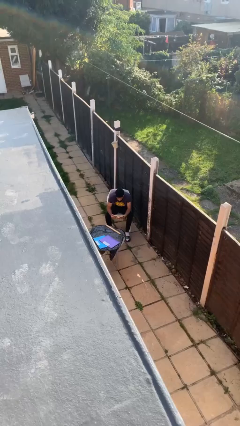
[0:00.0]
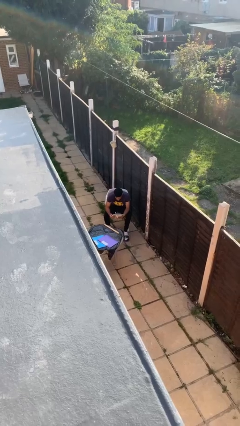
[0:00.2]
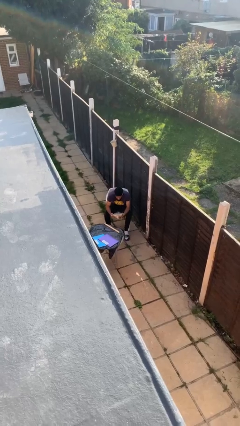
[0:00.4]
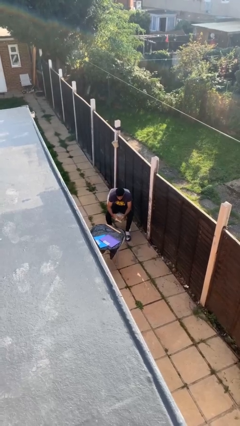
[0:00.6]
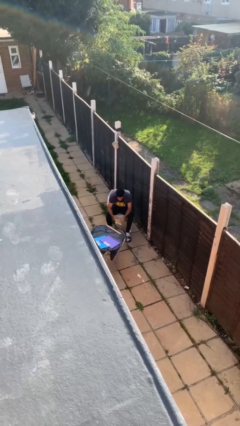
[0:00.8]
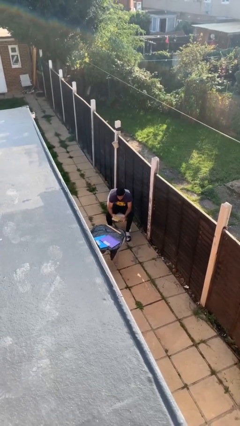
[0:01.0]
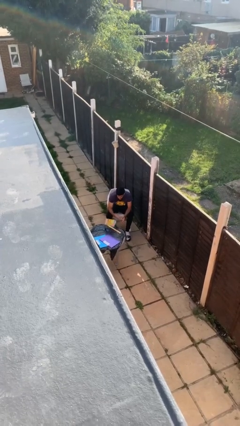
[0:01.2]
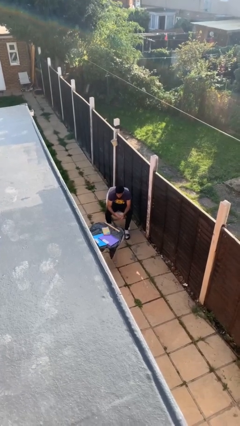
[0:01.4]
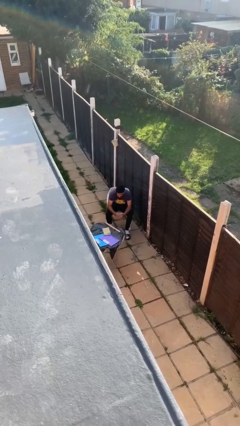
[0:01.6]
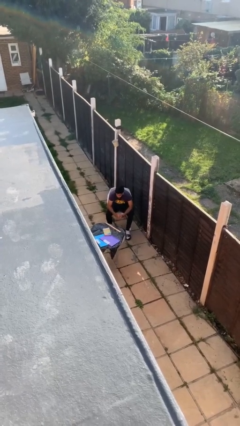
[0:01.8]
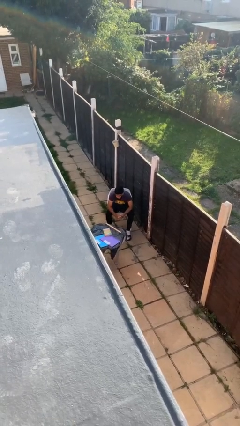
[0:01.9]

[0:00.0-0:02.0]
person puts down object on table

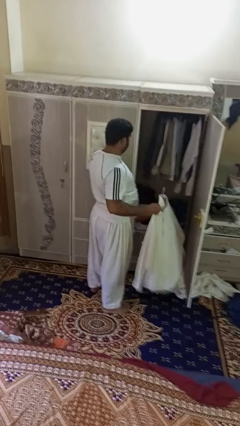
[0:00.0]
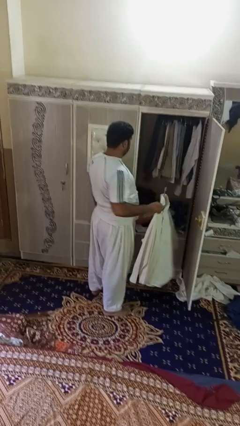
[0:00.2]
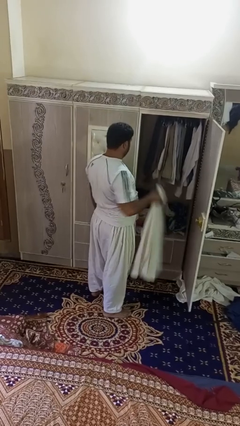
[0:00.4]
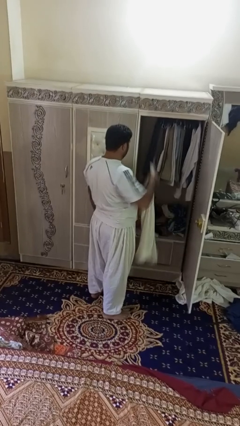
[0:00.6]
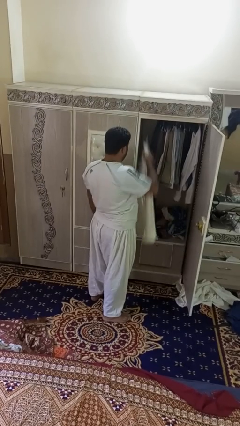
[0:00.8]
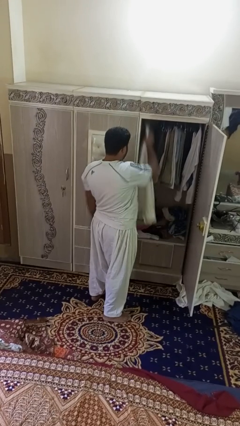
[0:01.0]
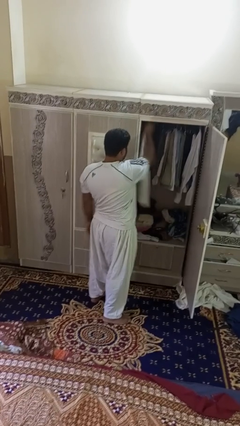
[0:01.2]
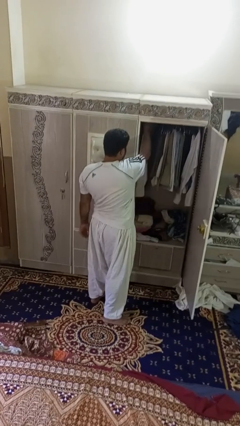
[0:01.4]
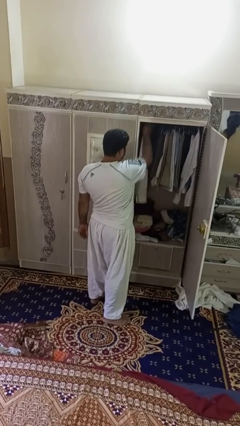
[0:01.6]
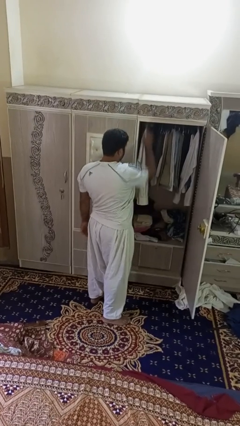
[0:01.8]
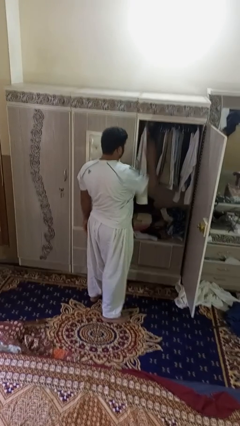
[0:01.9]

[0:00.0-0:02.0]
person puts clothes into closet

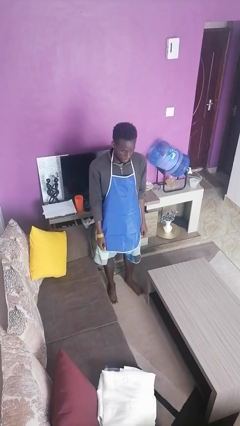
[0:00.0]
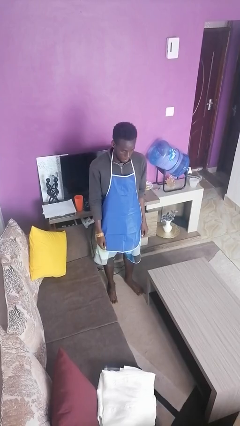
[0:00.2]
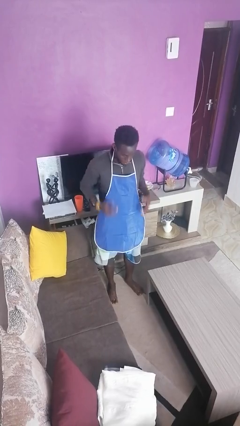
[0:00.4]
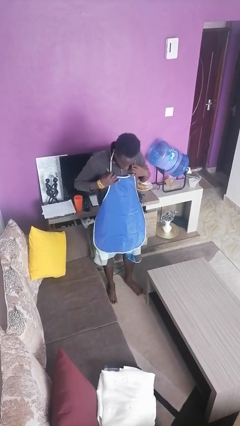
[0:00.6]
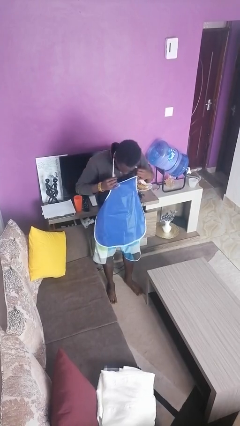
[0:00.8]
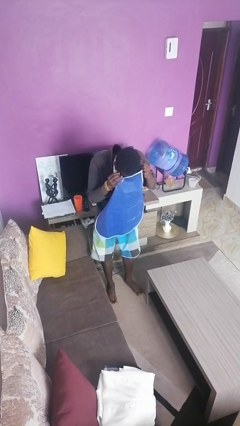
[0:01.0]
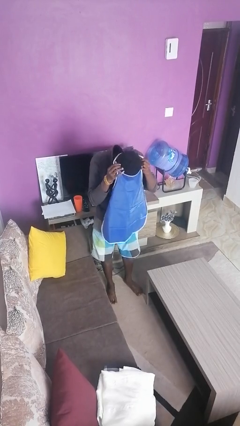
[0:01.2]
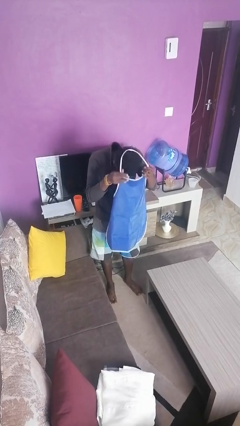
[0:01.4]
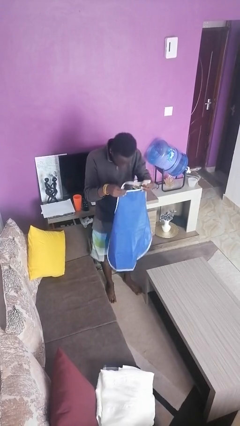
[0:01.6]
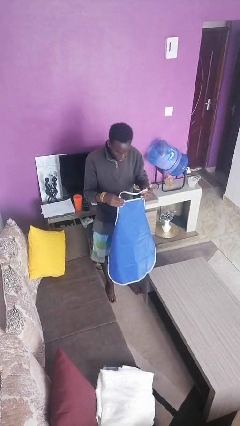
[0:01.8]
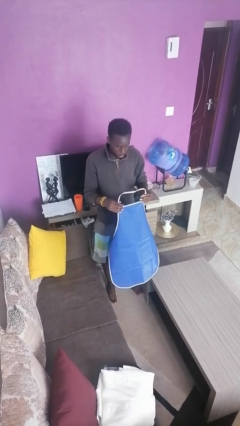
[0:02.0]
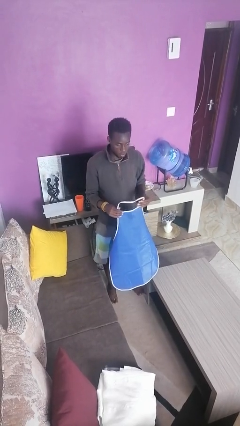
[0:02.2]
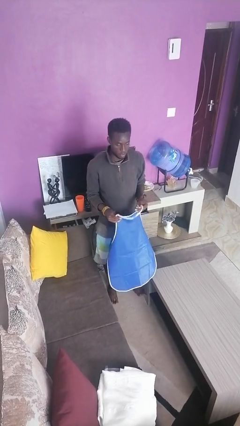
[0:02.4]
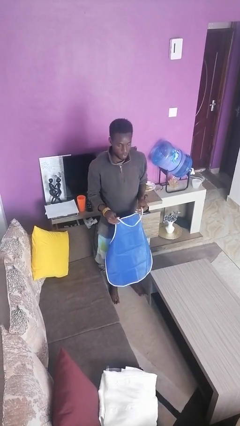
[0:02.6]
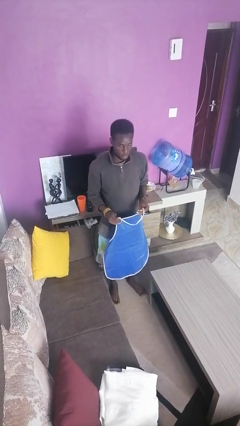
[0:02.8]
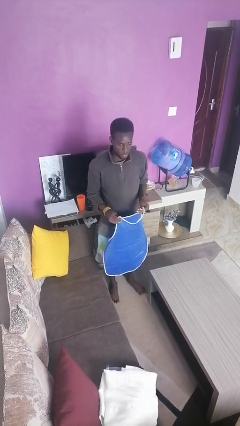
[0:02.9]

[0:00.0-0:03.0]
person takes off apron

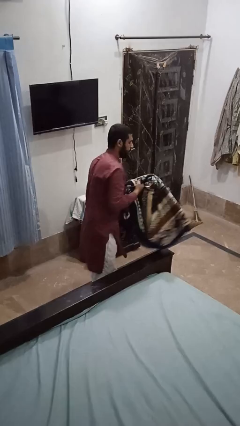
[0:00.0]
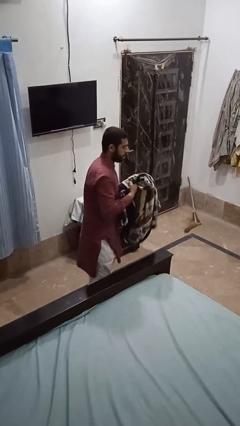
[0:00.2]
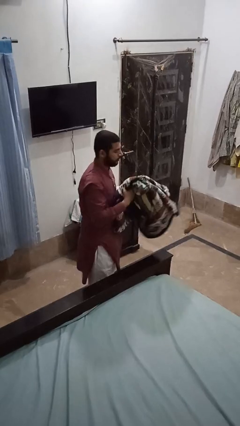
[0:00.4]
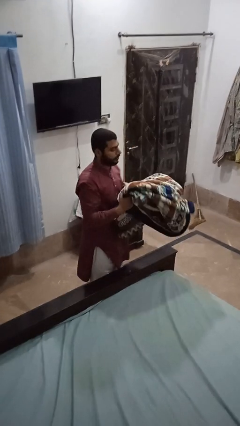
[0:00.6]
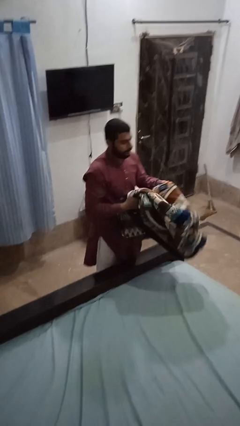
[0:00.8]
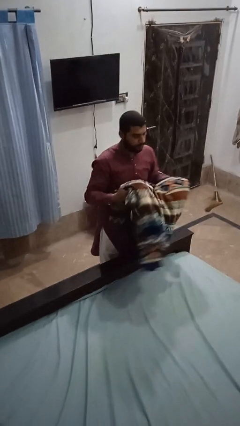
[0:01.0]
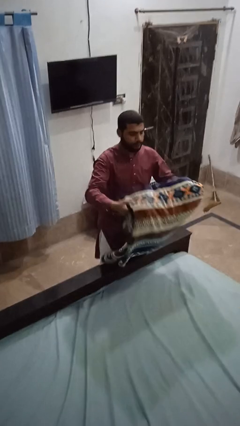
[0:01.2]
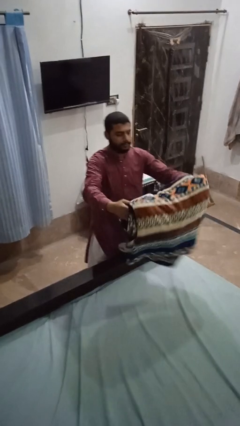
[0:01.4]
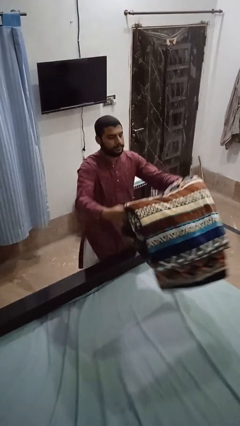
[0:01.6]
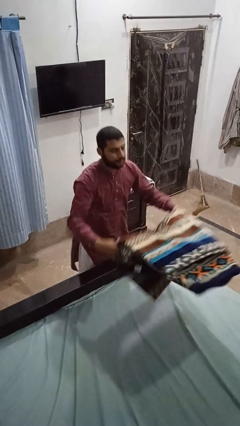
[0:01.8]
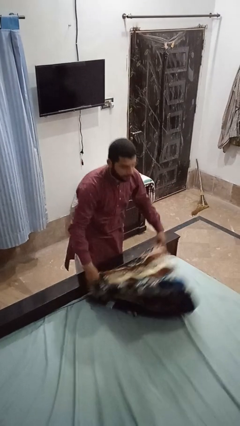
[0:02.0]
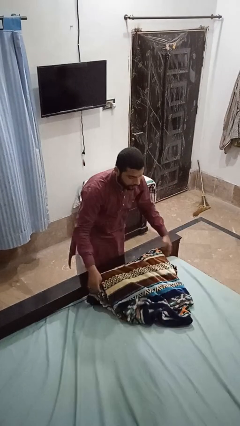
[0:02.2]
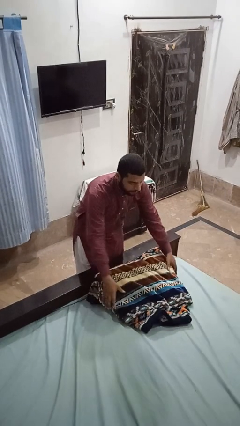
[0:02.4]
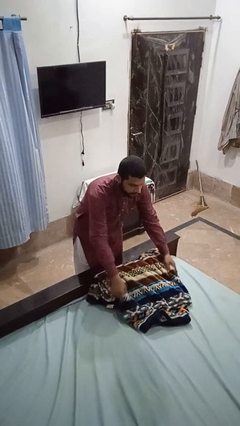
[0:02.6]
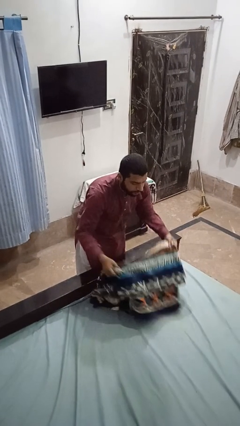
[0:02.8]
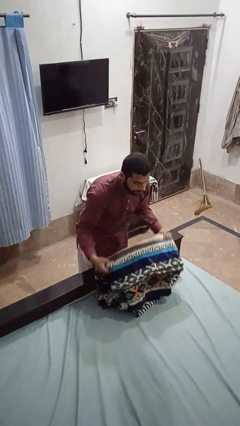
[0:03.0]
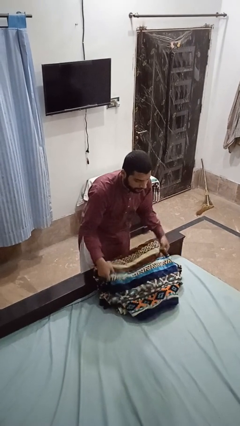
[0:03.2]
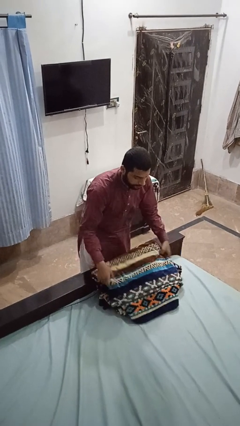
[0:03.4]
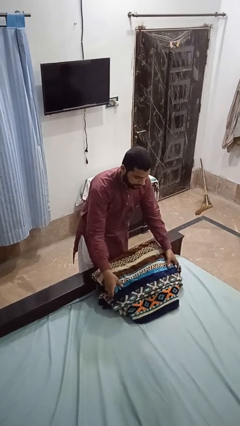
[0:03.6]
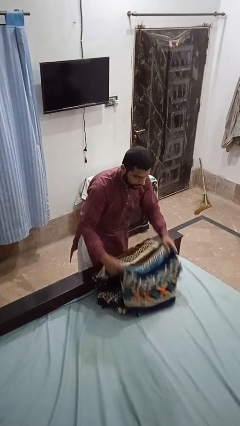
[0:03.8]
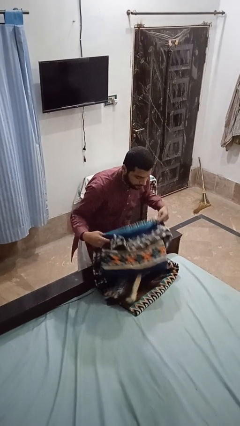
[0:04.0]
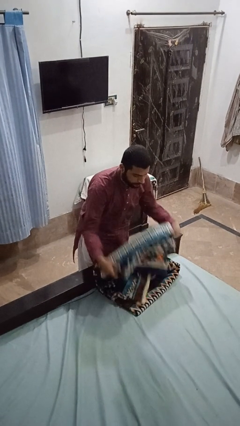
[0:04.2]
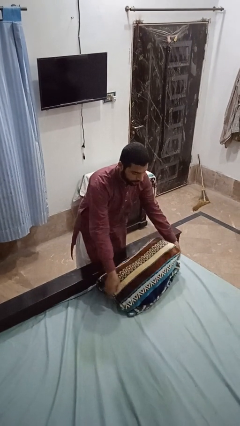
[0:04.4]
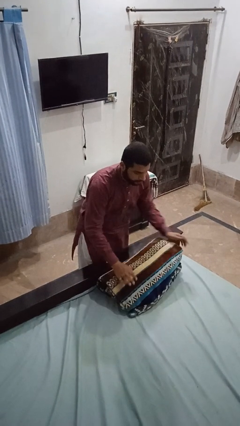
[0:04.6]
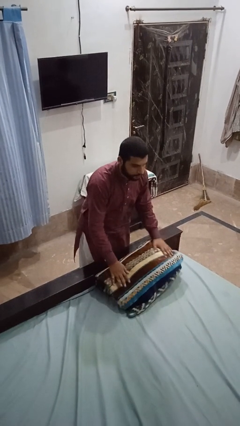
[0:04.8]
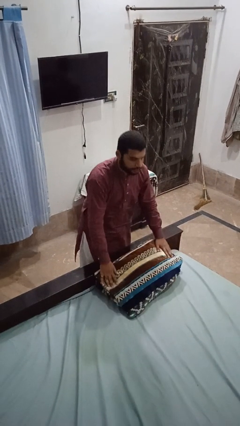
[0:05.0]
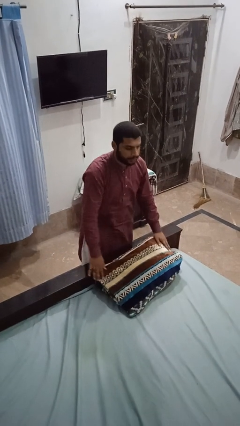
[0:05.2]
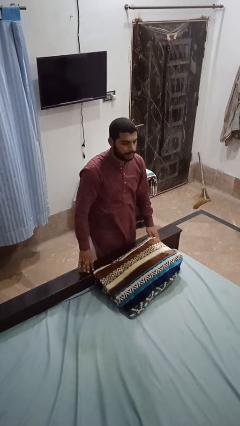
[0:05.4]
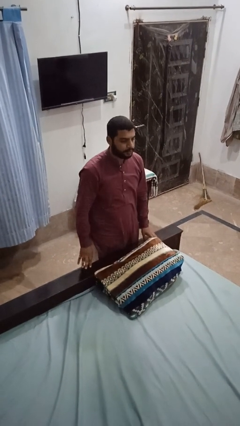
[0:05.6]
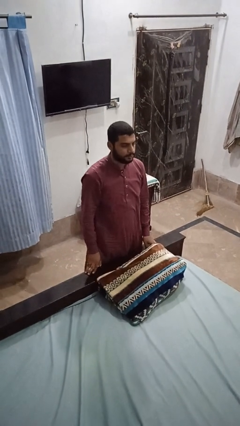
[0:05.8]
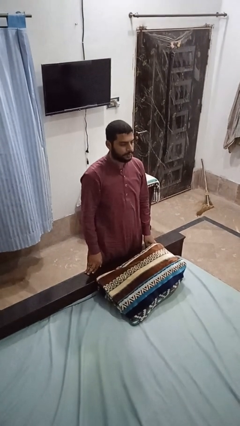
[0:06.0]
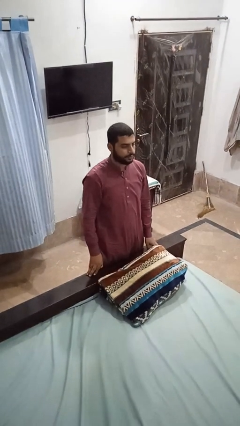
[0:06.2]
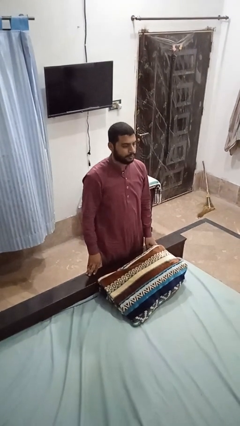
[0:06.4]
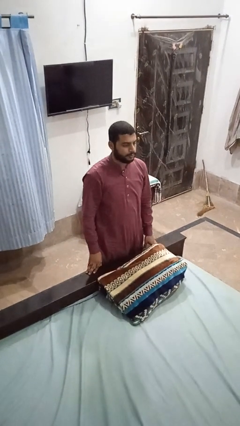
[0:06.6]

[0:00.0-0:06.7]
person makes bed

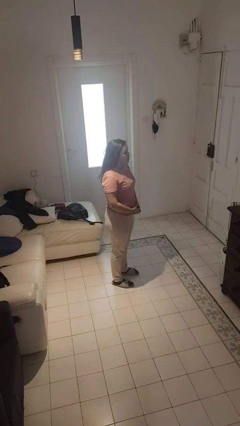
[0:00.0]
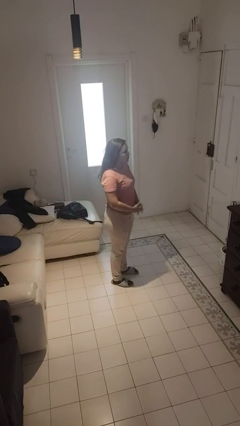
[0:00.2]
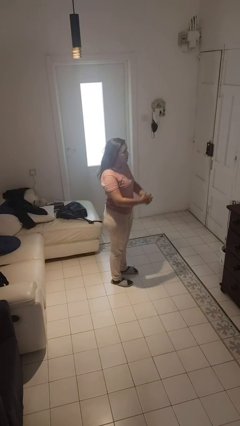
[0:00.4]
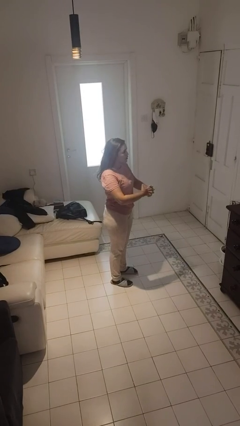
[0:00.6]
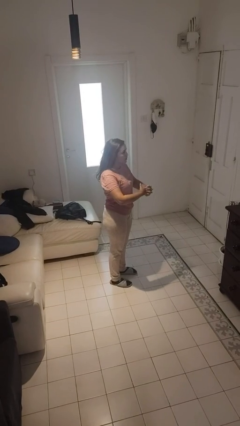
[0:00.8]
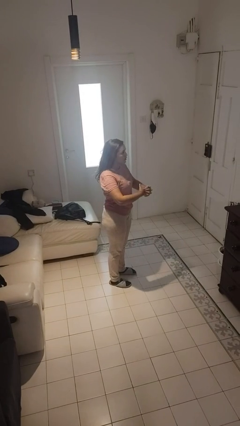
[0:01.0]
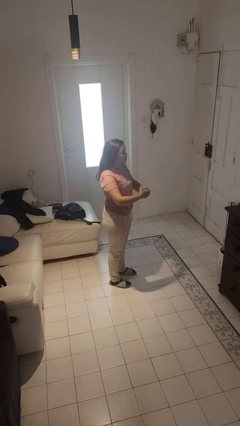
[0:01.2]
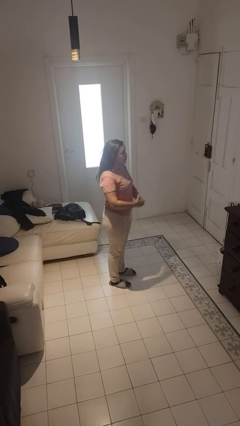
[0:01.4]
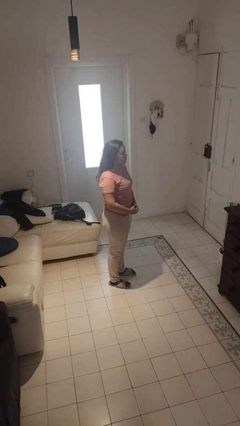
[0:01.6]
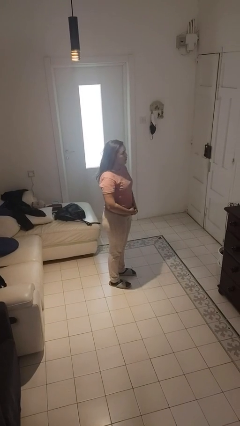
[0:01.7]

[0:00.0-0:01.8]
person cracks knuckles

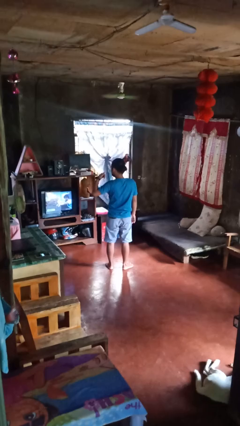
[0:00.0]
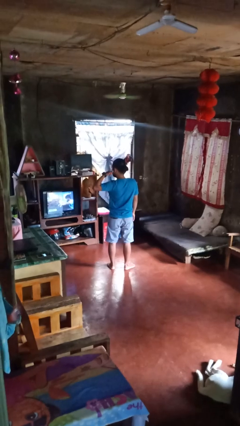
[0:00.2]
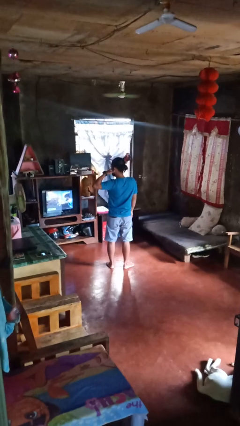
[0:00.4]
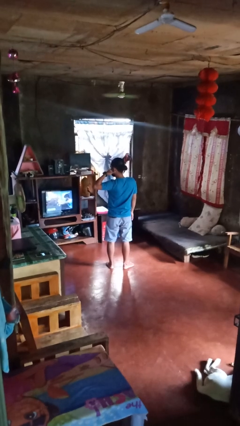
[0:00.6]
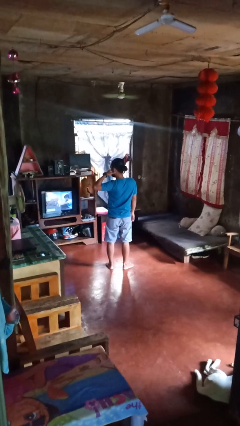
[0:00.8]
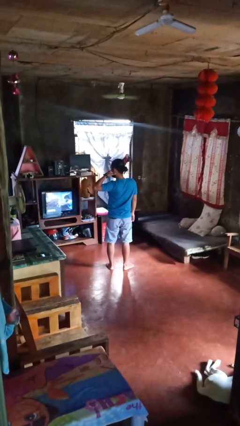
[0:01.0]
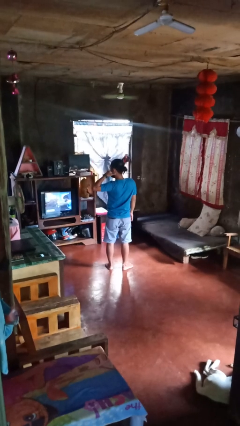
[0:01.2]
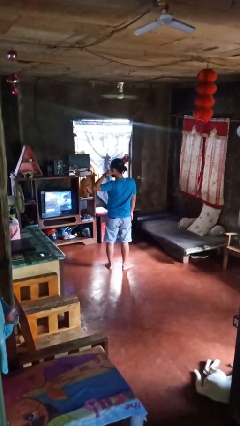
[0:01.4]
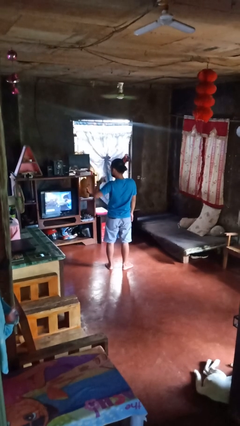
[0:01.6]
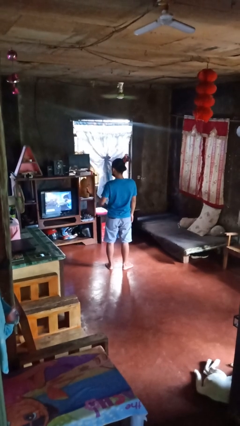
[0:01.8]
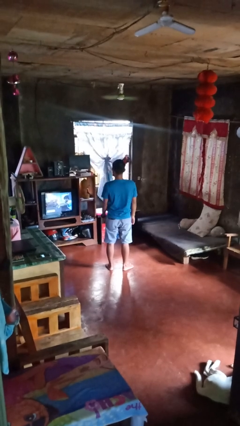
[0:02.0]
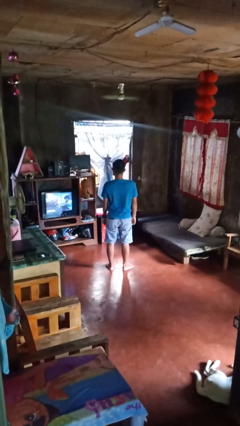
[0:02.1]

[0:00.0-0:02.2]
person gestures call me
